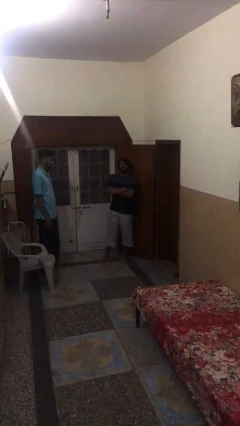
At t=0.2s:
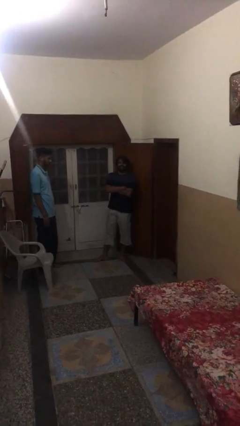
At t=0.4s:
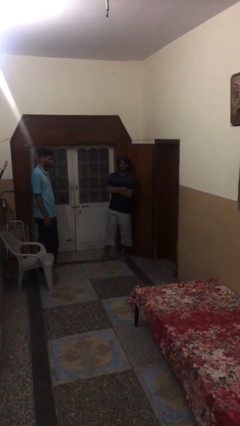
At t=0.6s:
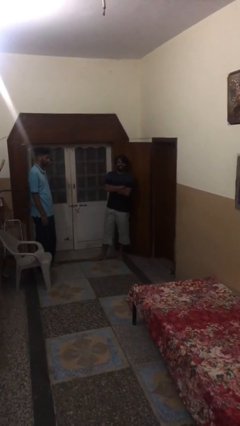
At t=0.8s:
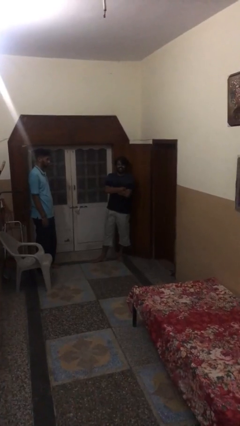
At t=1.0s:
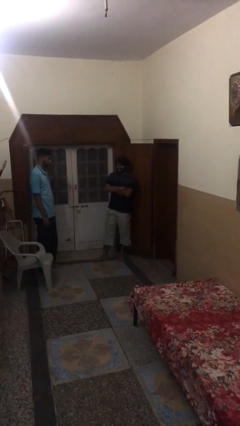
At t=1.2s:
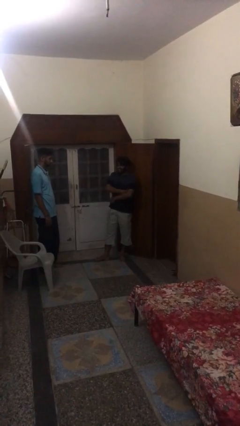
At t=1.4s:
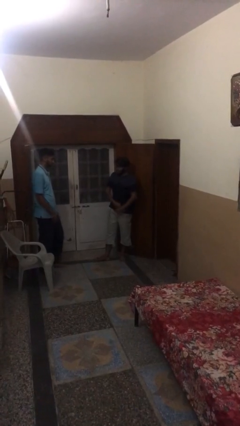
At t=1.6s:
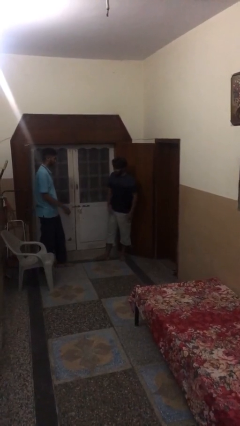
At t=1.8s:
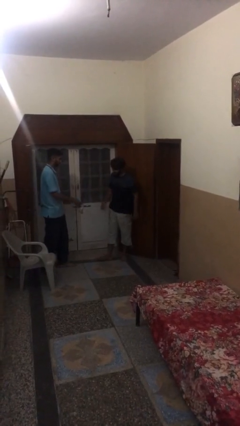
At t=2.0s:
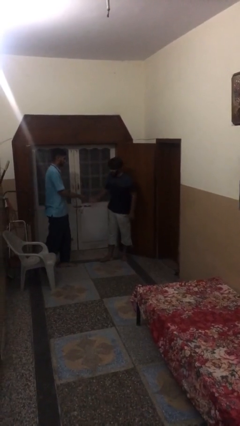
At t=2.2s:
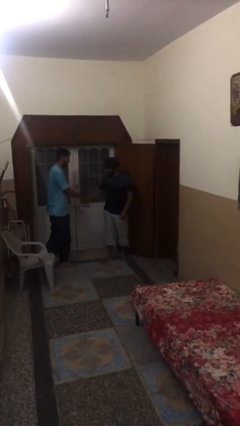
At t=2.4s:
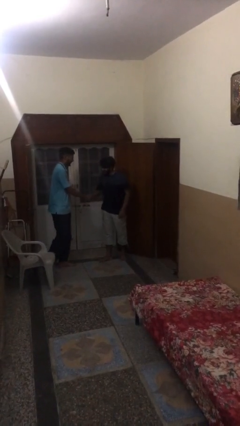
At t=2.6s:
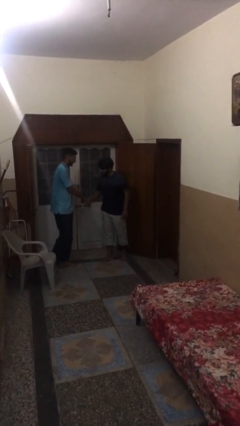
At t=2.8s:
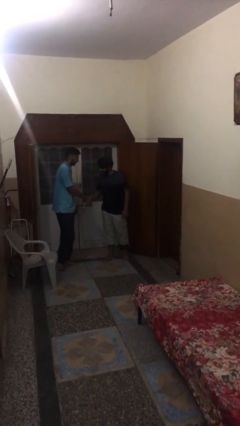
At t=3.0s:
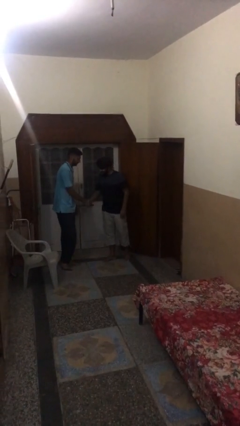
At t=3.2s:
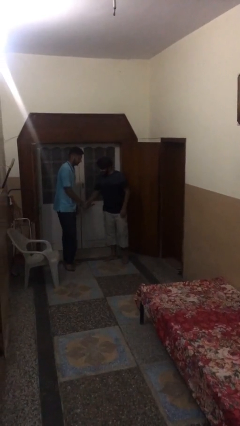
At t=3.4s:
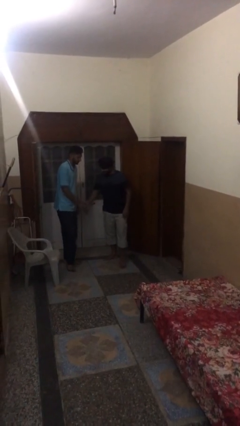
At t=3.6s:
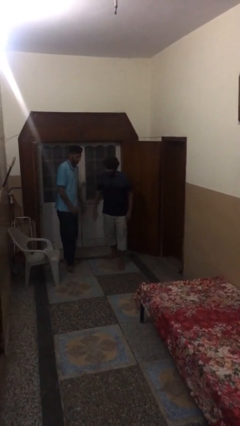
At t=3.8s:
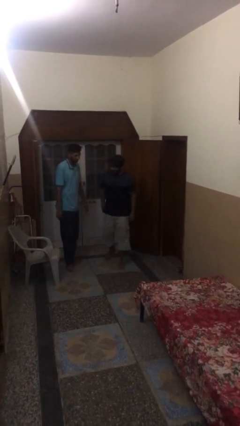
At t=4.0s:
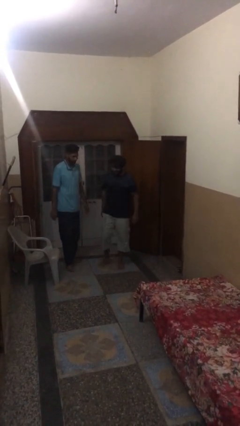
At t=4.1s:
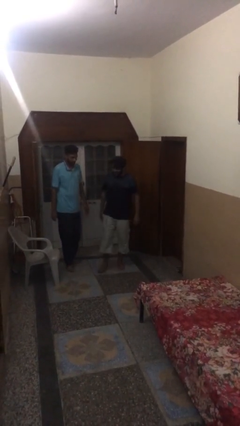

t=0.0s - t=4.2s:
person shakes hand

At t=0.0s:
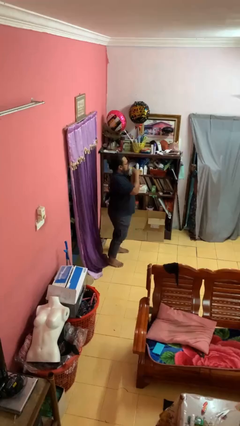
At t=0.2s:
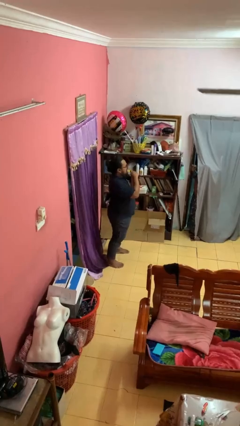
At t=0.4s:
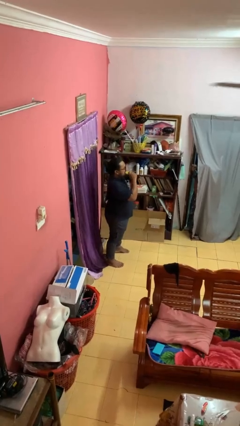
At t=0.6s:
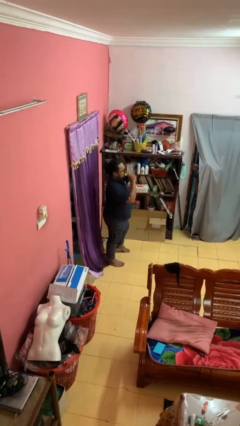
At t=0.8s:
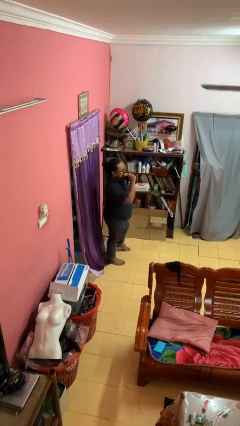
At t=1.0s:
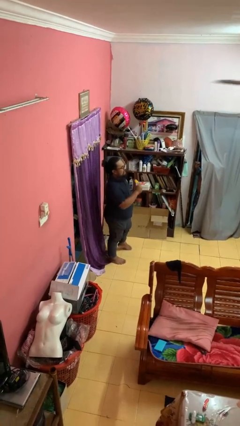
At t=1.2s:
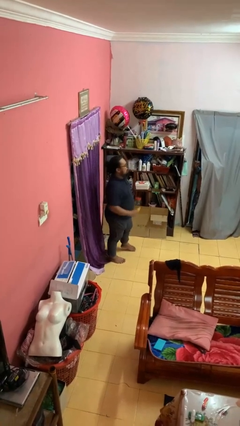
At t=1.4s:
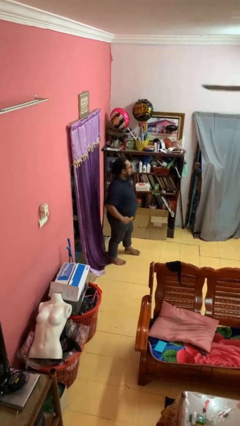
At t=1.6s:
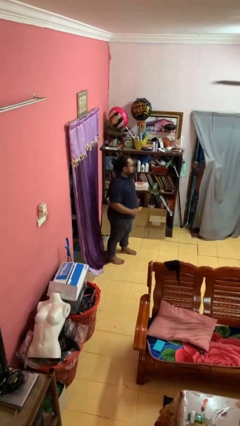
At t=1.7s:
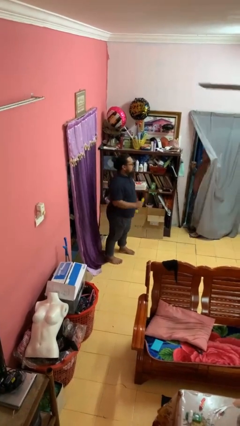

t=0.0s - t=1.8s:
person eats banana

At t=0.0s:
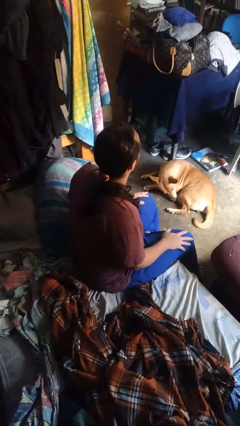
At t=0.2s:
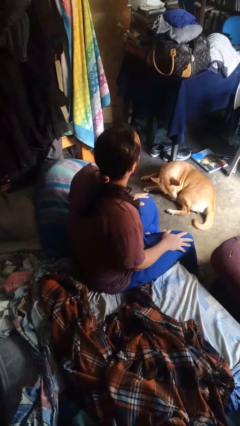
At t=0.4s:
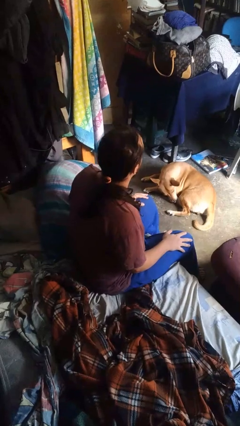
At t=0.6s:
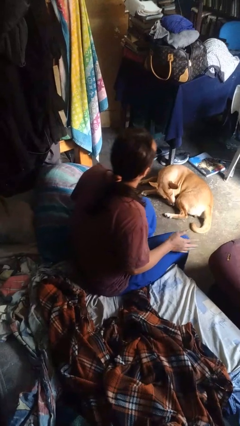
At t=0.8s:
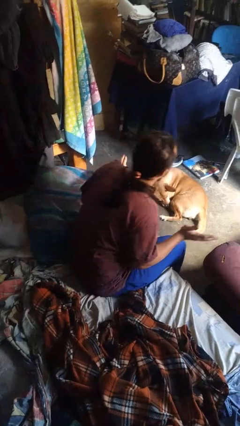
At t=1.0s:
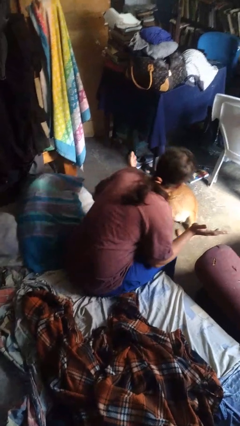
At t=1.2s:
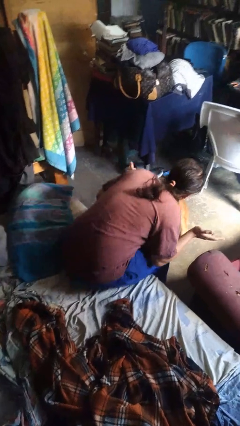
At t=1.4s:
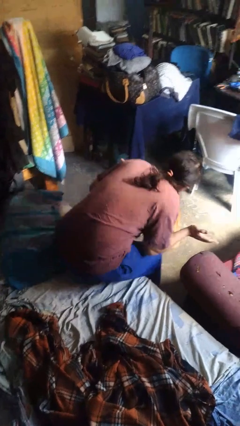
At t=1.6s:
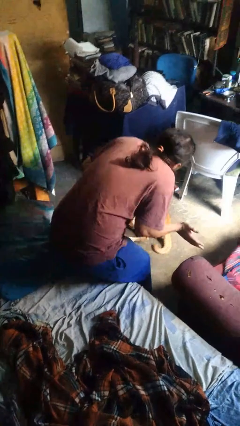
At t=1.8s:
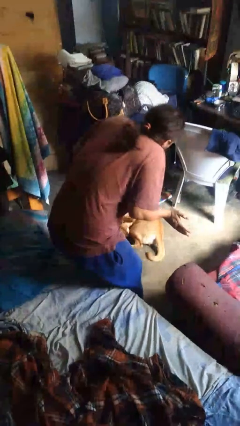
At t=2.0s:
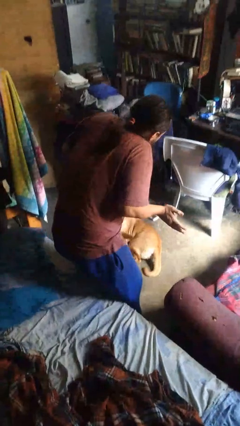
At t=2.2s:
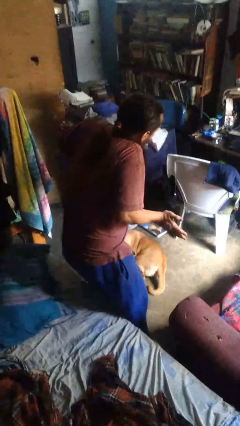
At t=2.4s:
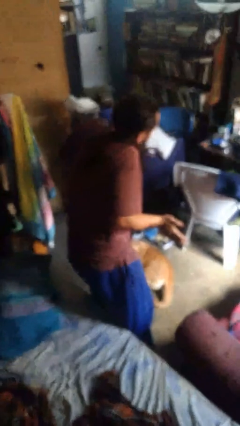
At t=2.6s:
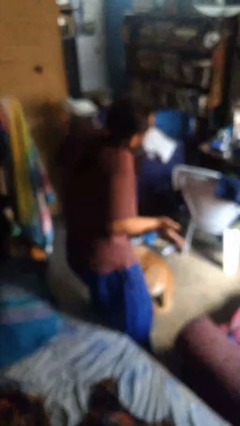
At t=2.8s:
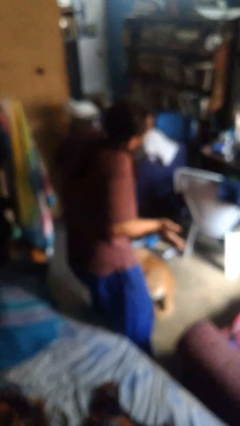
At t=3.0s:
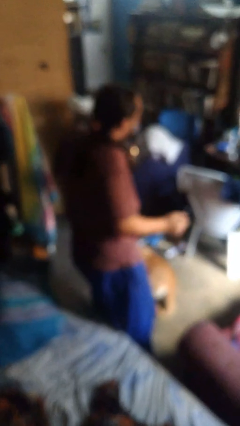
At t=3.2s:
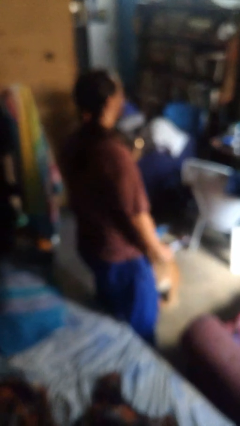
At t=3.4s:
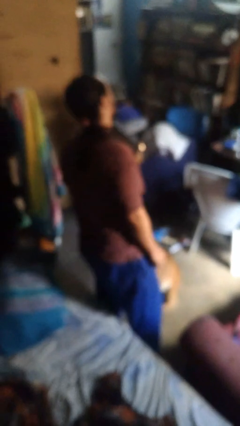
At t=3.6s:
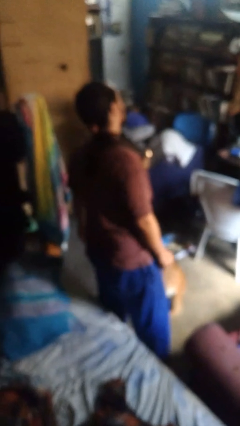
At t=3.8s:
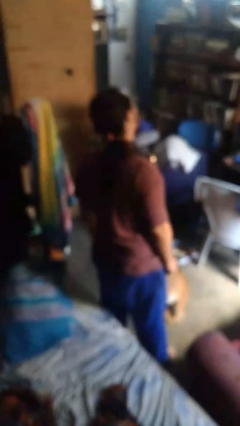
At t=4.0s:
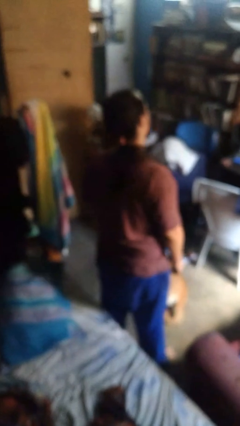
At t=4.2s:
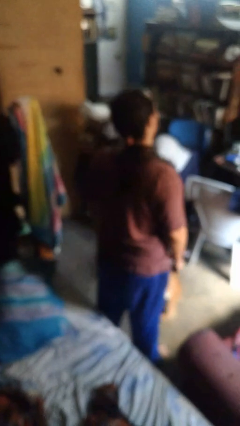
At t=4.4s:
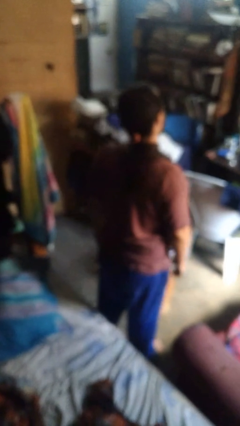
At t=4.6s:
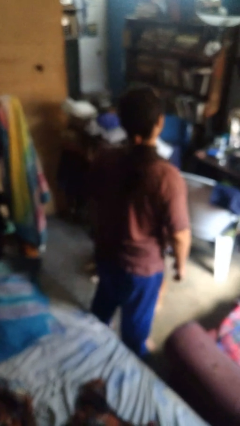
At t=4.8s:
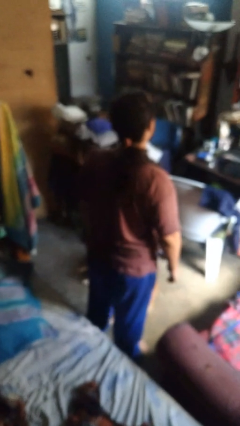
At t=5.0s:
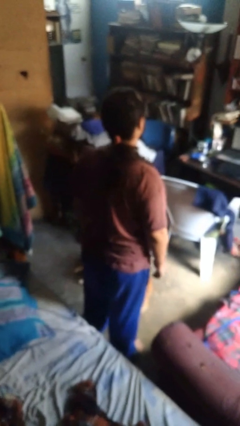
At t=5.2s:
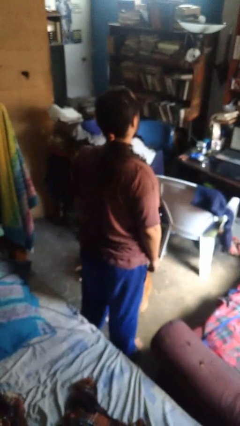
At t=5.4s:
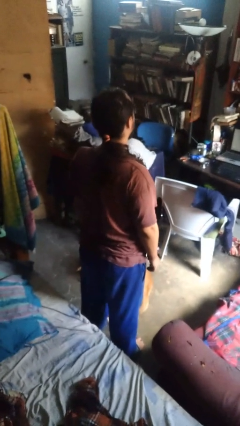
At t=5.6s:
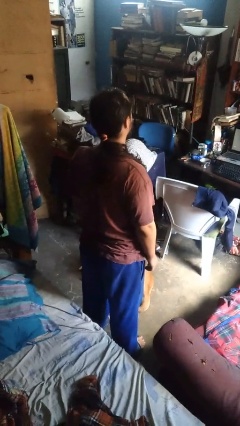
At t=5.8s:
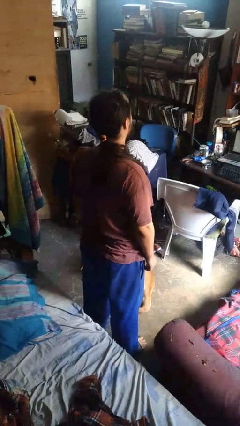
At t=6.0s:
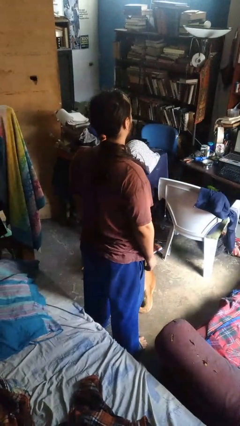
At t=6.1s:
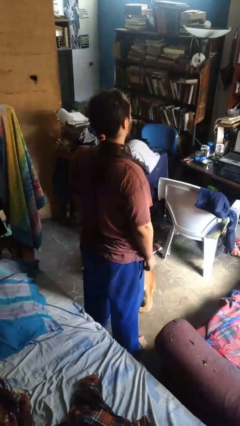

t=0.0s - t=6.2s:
person shrugs

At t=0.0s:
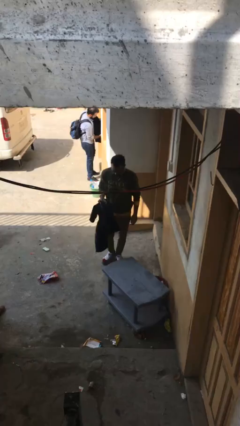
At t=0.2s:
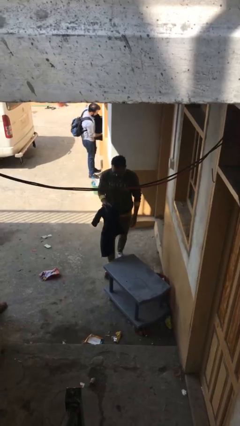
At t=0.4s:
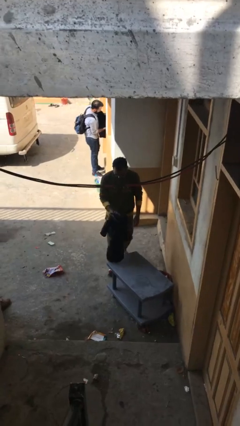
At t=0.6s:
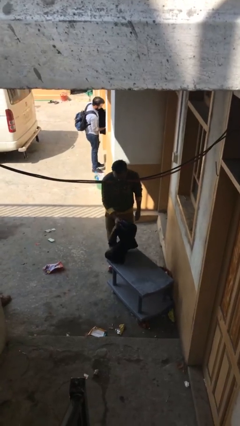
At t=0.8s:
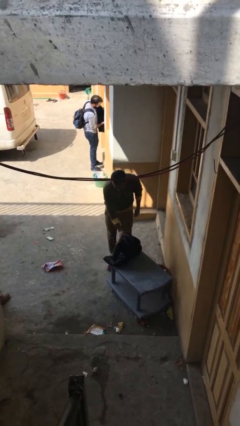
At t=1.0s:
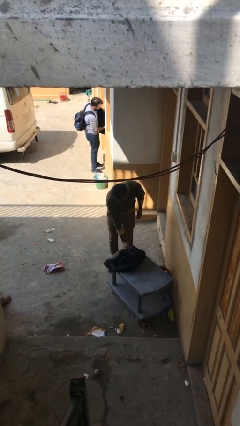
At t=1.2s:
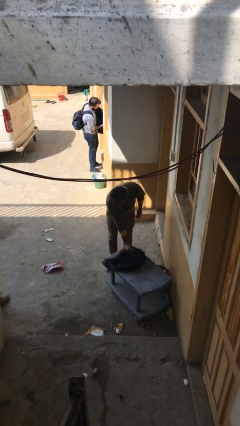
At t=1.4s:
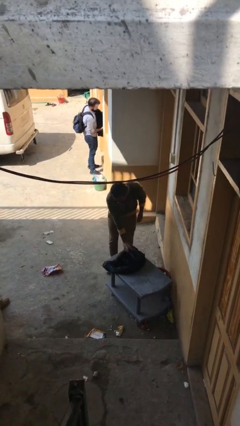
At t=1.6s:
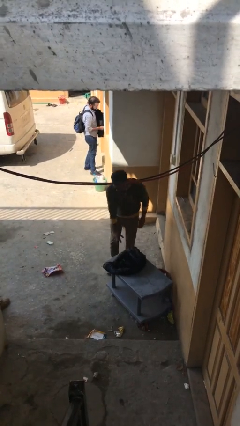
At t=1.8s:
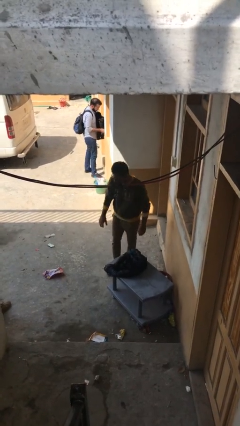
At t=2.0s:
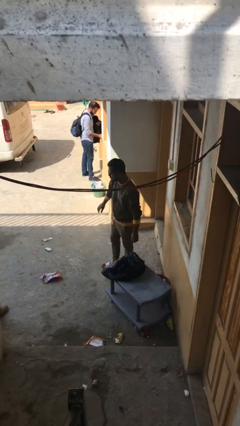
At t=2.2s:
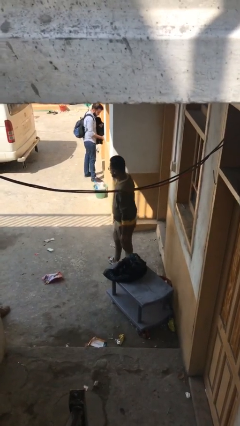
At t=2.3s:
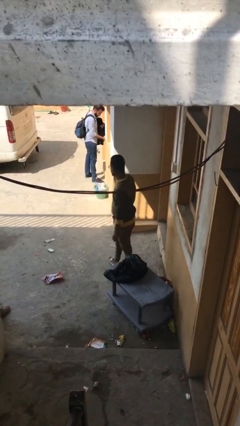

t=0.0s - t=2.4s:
person puts down object on table

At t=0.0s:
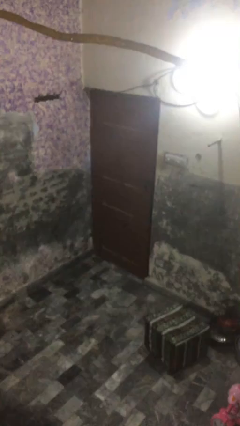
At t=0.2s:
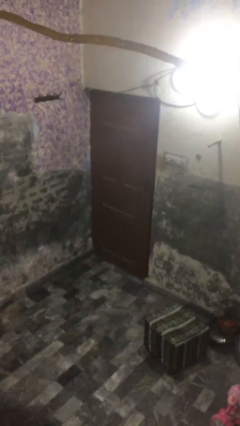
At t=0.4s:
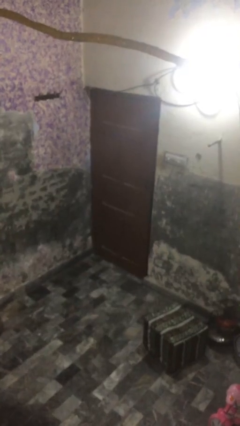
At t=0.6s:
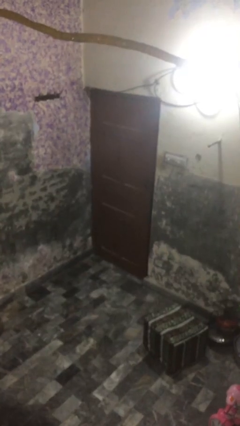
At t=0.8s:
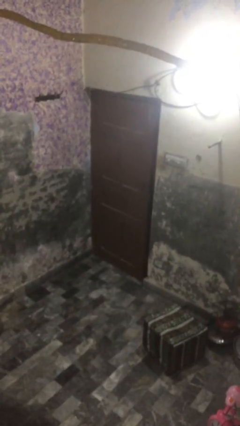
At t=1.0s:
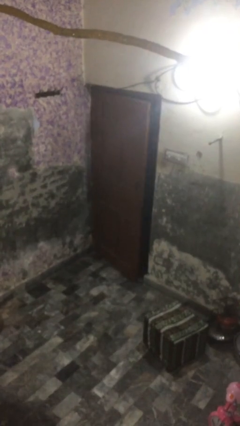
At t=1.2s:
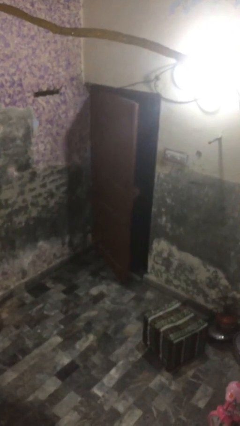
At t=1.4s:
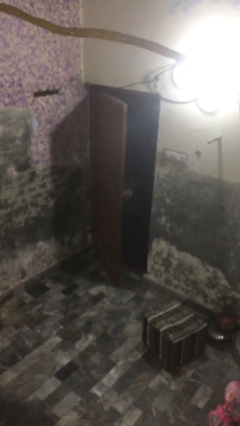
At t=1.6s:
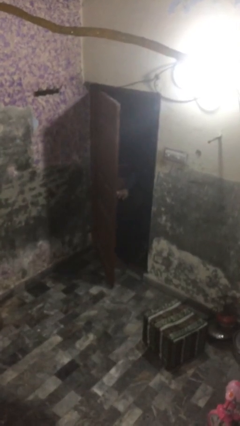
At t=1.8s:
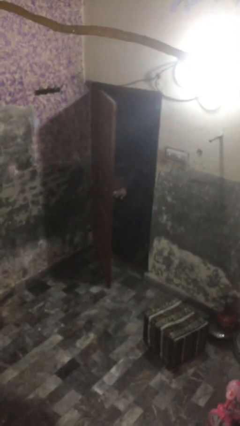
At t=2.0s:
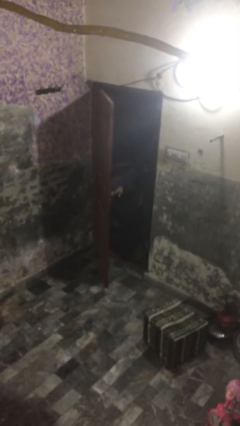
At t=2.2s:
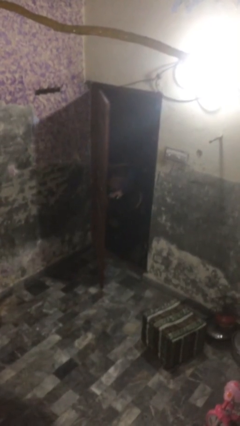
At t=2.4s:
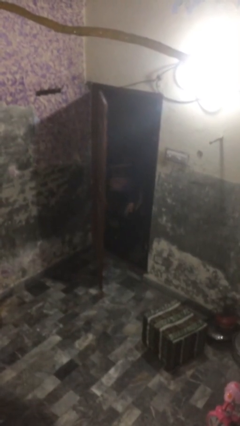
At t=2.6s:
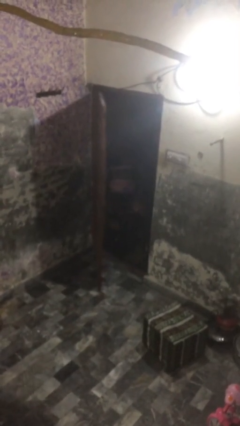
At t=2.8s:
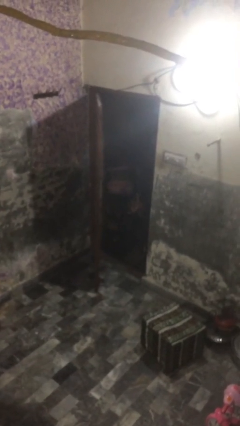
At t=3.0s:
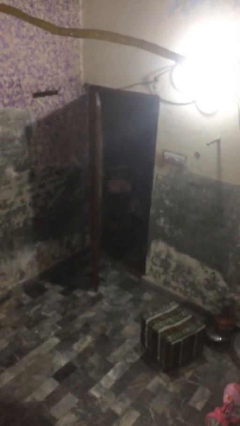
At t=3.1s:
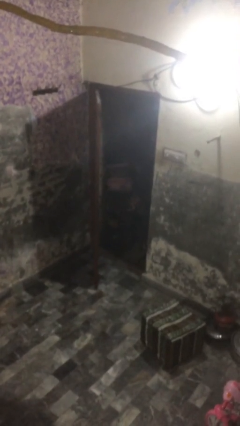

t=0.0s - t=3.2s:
person opens facility door
